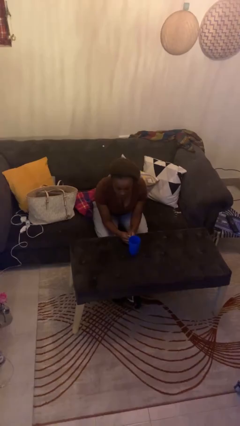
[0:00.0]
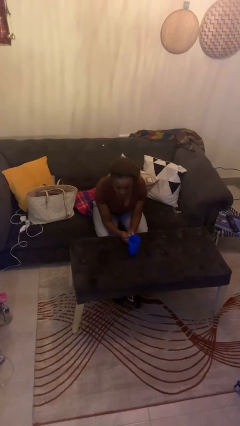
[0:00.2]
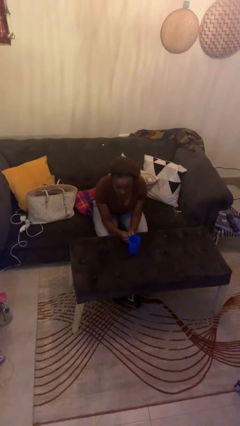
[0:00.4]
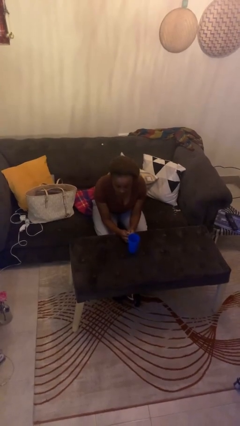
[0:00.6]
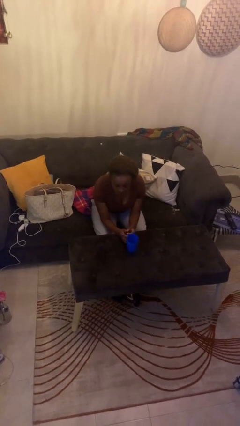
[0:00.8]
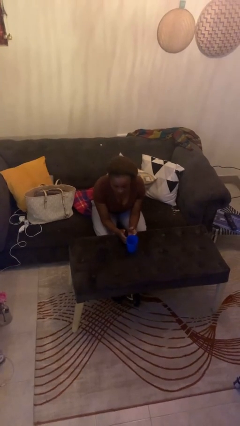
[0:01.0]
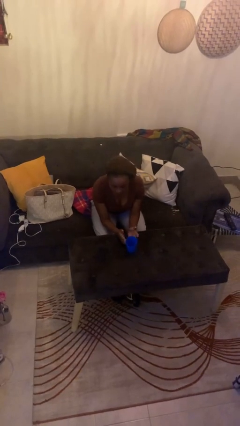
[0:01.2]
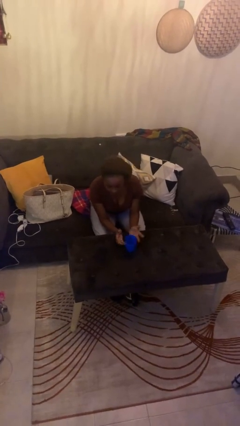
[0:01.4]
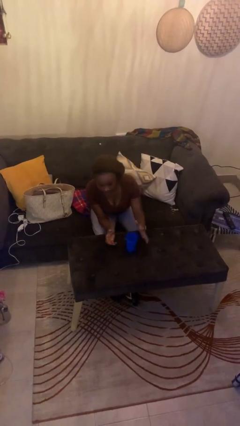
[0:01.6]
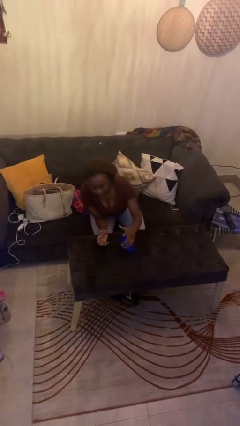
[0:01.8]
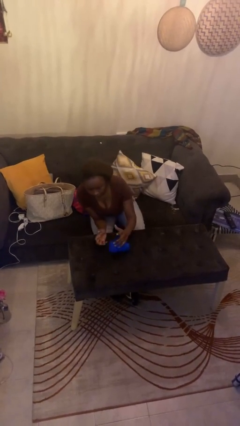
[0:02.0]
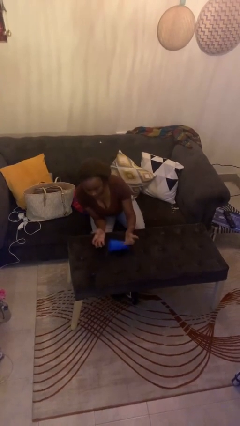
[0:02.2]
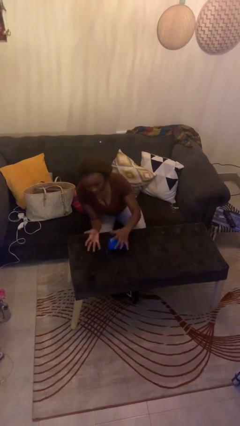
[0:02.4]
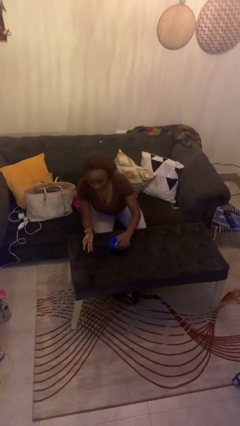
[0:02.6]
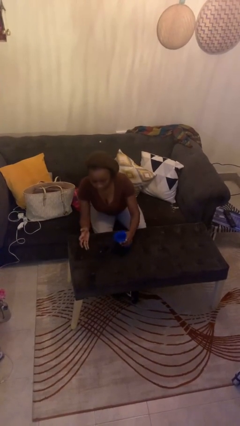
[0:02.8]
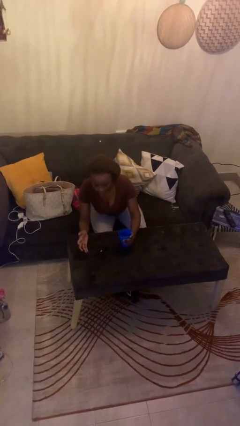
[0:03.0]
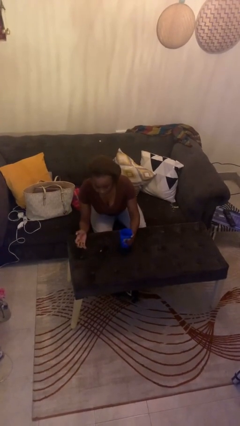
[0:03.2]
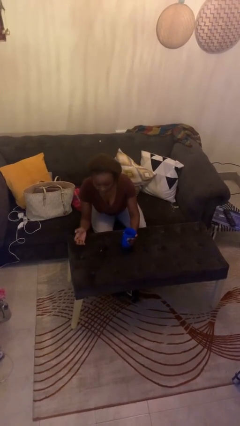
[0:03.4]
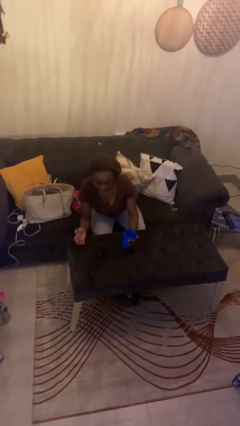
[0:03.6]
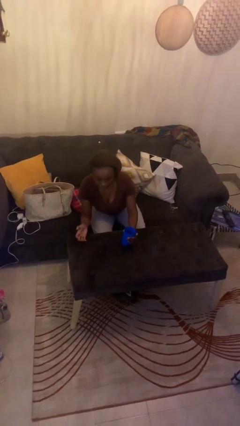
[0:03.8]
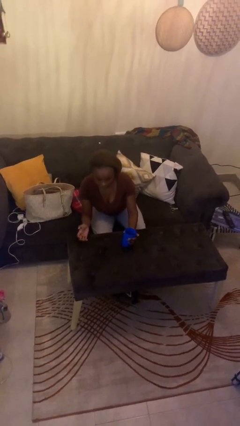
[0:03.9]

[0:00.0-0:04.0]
person spills on table

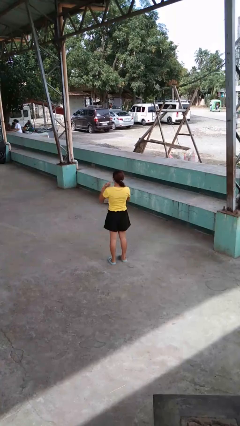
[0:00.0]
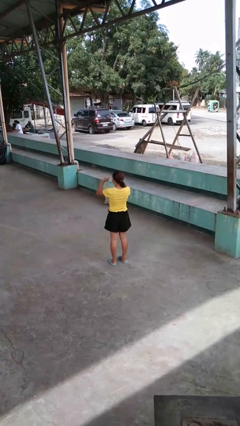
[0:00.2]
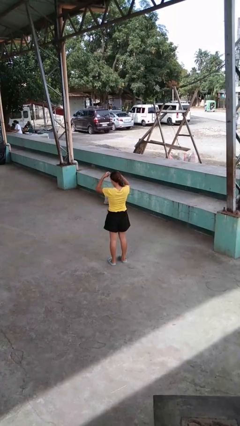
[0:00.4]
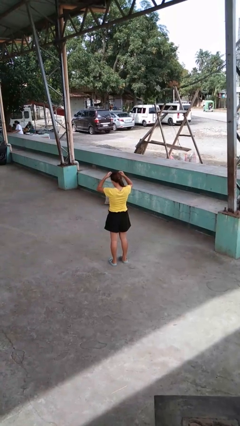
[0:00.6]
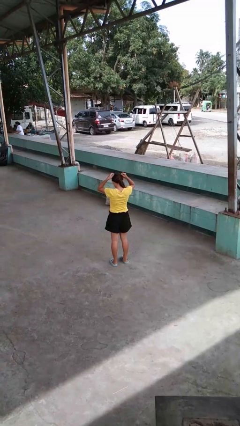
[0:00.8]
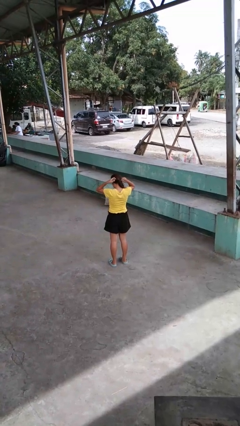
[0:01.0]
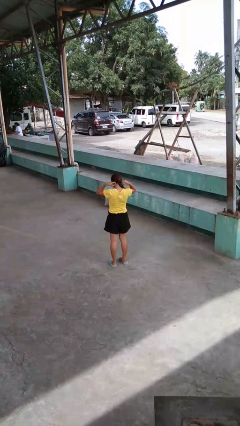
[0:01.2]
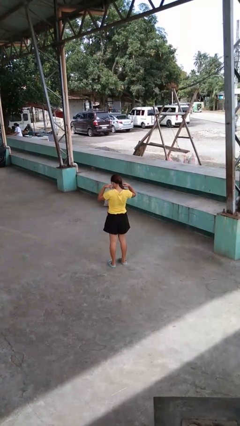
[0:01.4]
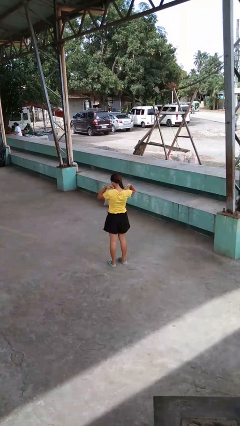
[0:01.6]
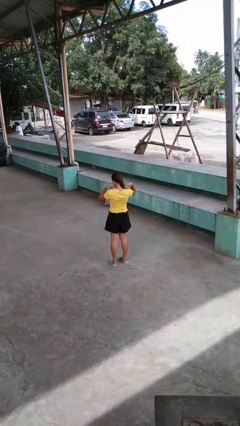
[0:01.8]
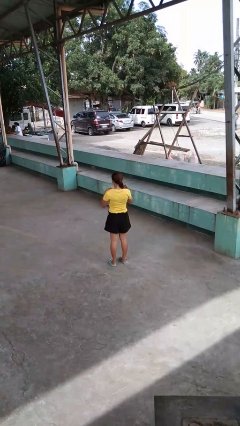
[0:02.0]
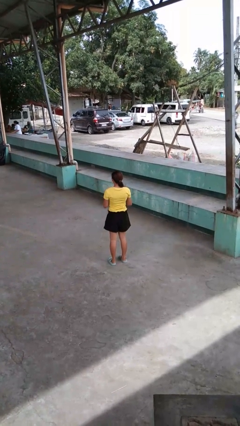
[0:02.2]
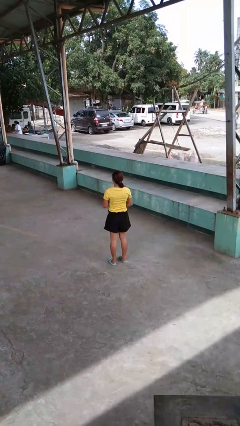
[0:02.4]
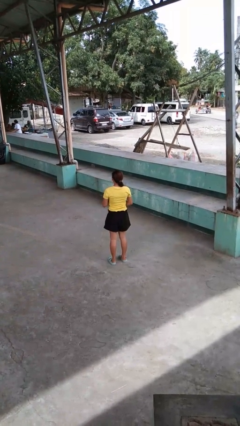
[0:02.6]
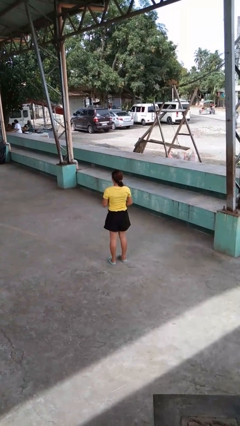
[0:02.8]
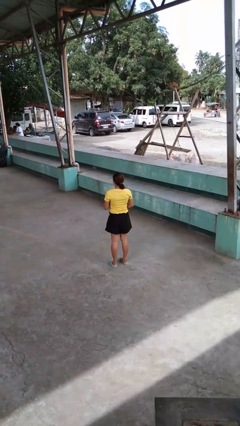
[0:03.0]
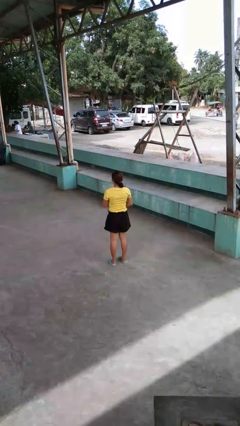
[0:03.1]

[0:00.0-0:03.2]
person puts on necklace

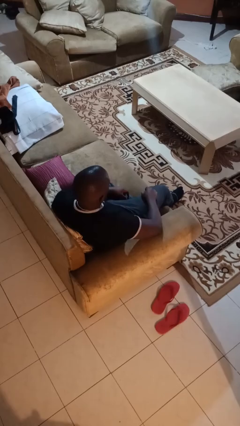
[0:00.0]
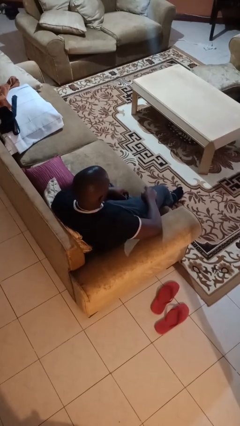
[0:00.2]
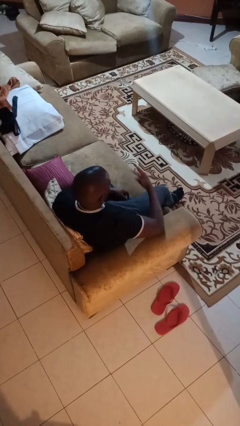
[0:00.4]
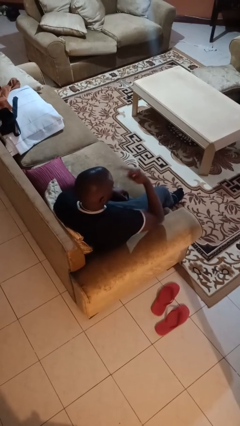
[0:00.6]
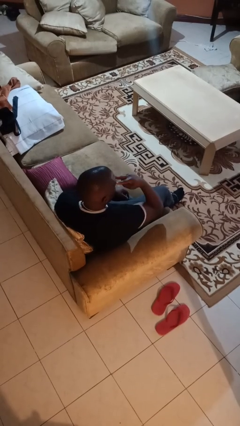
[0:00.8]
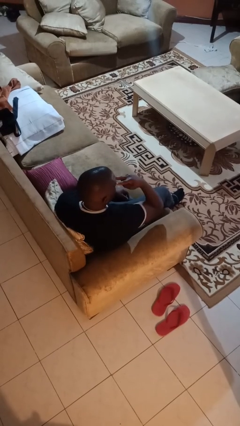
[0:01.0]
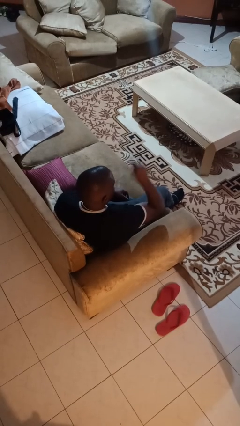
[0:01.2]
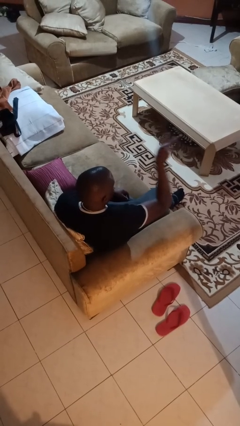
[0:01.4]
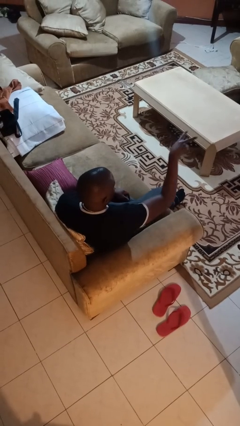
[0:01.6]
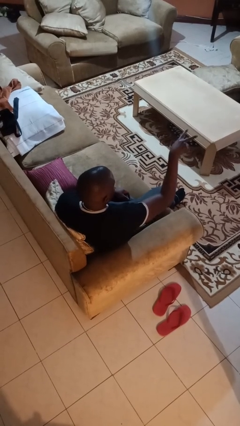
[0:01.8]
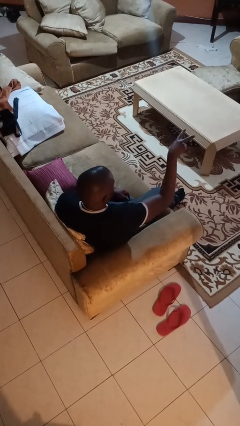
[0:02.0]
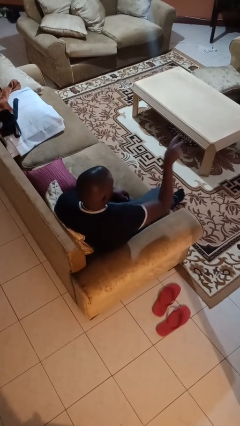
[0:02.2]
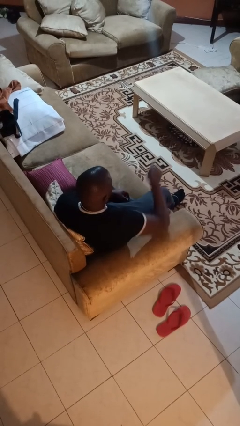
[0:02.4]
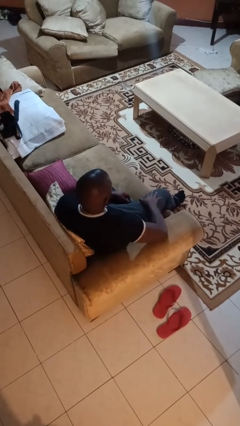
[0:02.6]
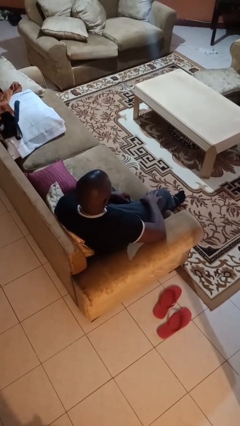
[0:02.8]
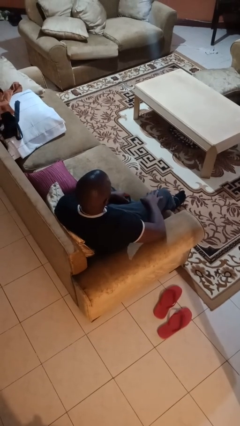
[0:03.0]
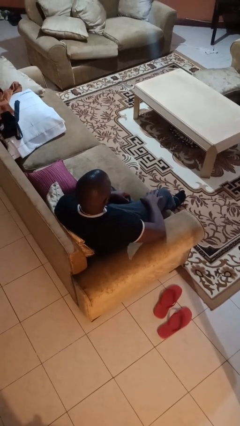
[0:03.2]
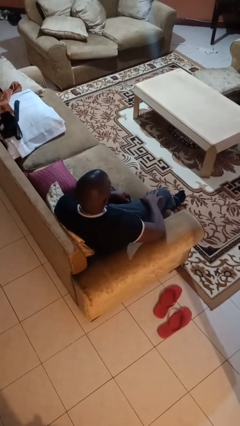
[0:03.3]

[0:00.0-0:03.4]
person gestures watch closely

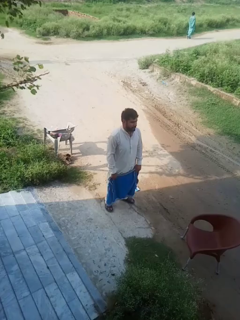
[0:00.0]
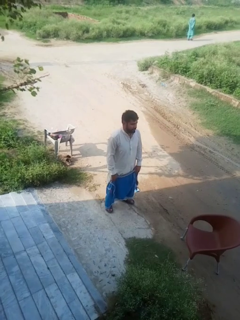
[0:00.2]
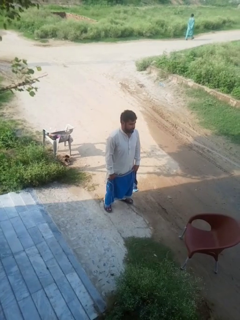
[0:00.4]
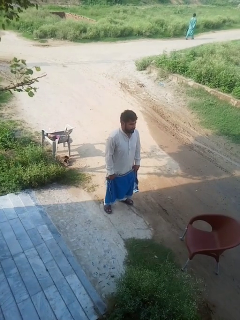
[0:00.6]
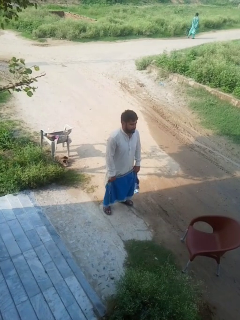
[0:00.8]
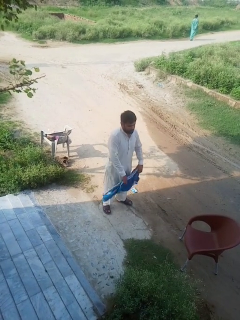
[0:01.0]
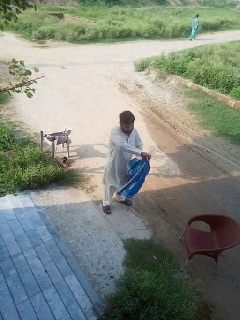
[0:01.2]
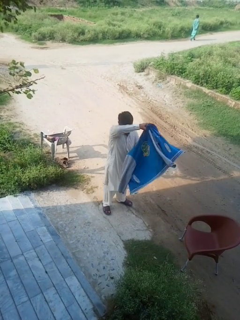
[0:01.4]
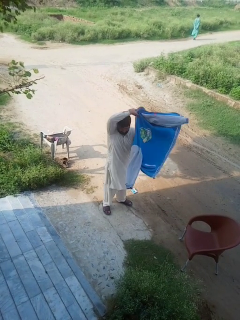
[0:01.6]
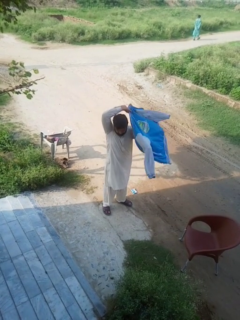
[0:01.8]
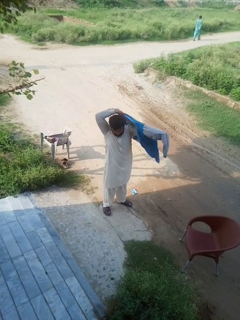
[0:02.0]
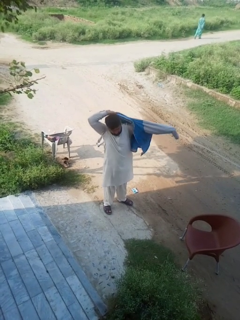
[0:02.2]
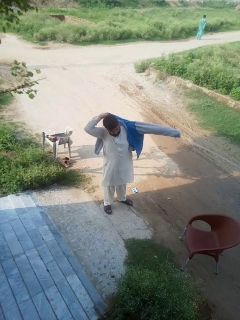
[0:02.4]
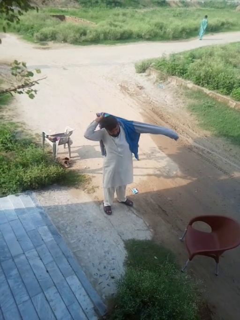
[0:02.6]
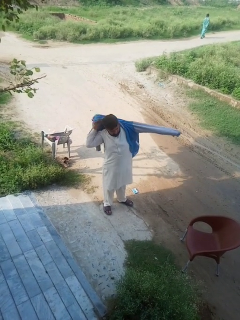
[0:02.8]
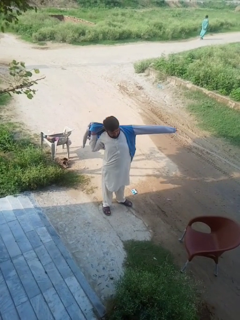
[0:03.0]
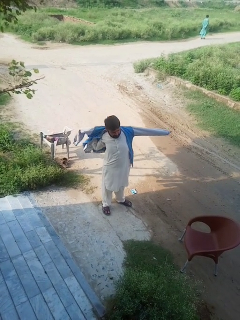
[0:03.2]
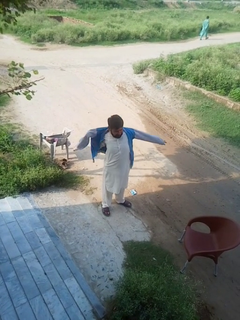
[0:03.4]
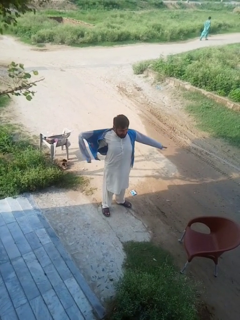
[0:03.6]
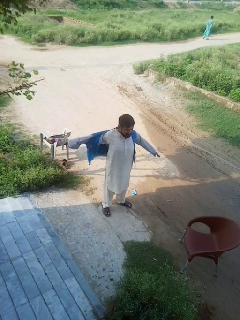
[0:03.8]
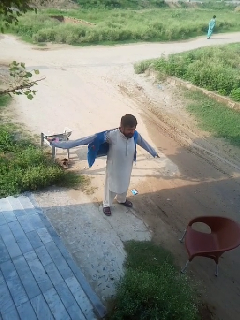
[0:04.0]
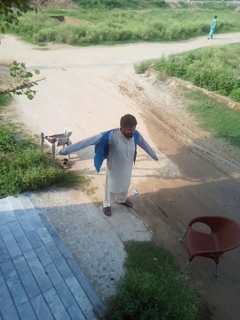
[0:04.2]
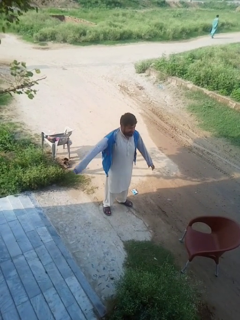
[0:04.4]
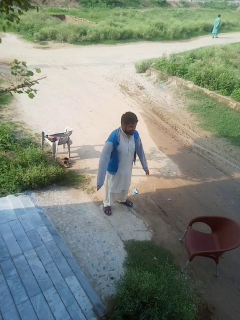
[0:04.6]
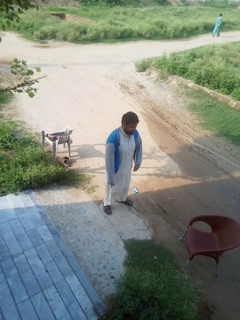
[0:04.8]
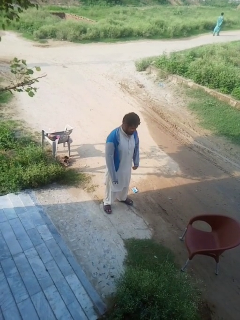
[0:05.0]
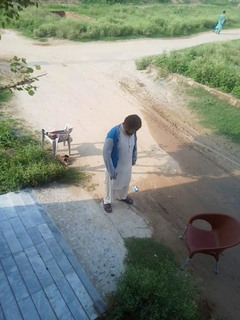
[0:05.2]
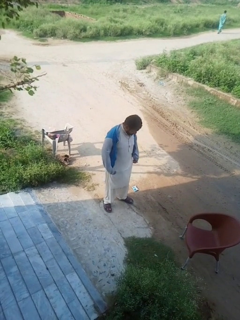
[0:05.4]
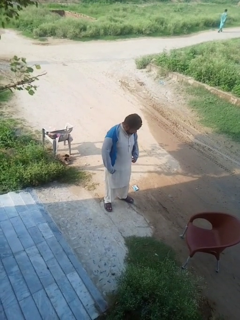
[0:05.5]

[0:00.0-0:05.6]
person puts on jacket

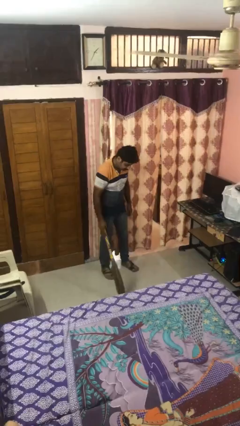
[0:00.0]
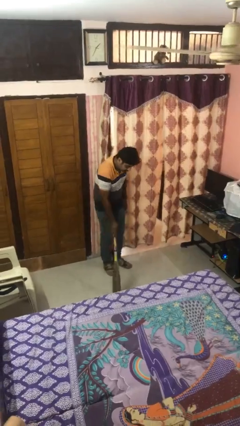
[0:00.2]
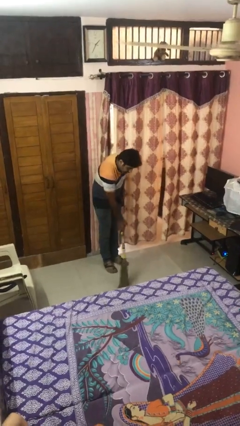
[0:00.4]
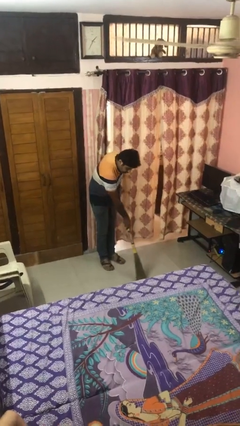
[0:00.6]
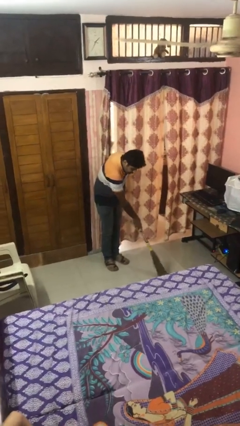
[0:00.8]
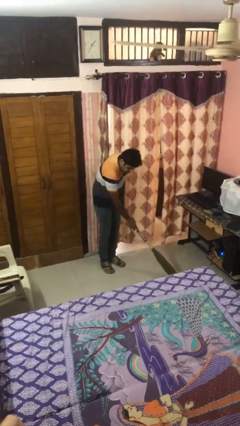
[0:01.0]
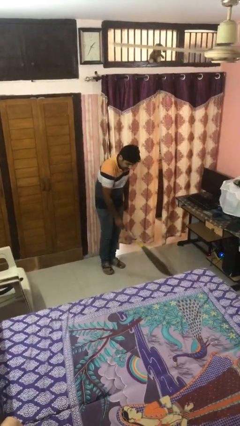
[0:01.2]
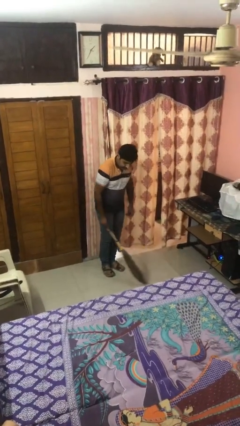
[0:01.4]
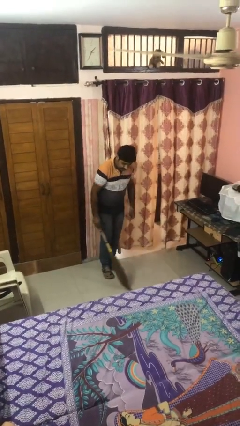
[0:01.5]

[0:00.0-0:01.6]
person sweeps floor

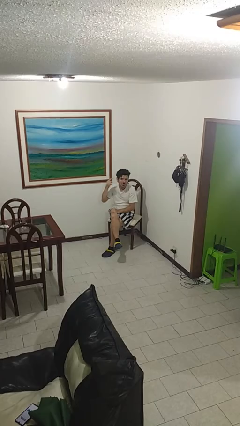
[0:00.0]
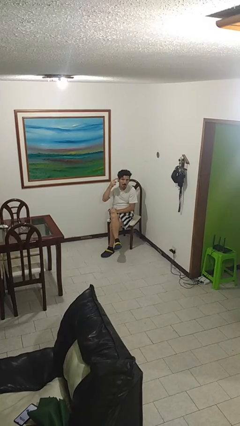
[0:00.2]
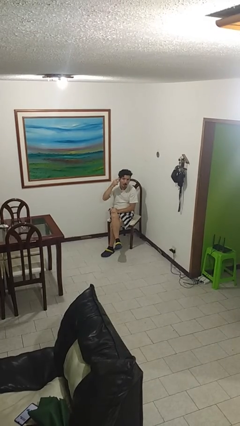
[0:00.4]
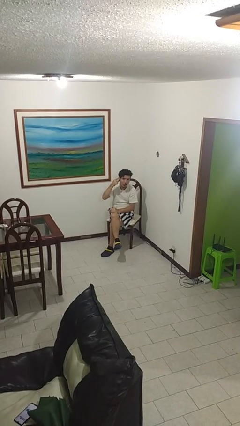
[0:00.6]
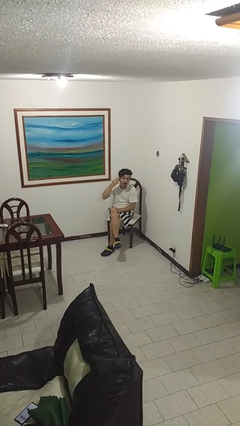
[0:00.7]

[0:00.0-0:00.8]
person gestures listen closely

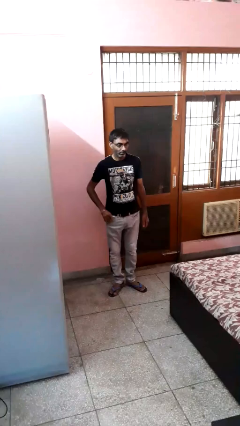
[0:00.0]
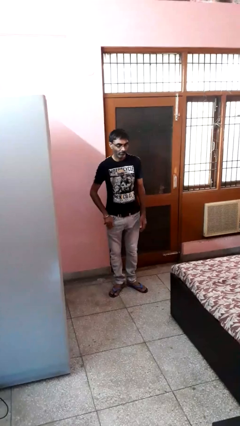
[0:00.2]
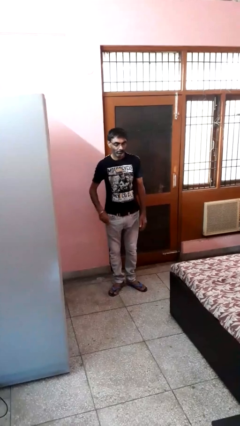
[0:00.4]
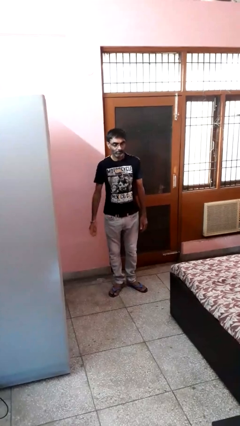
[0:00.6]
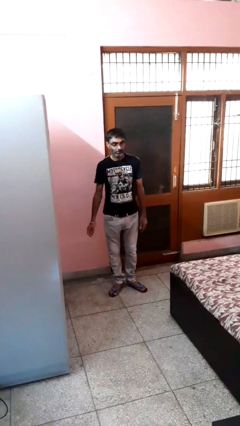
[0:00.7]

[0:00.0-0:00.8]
person puts phone into pocket
